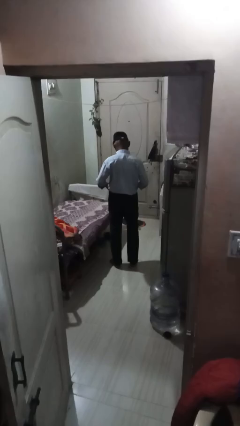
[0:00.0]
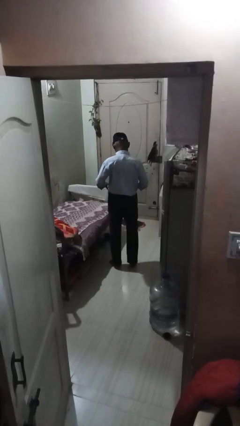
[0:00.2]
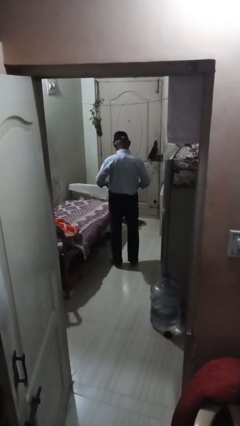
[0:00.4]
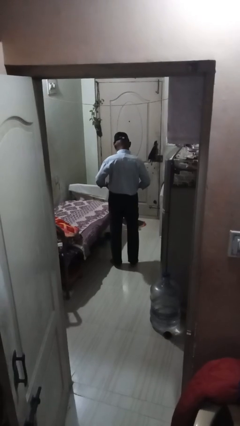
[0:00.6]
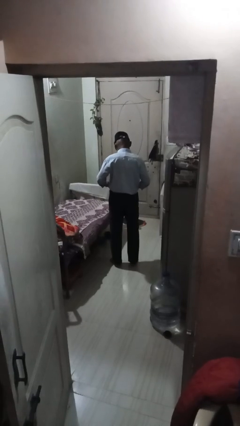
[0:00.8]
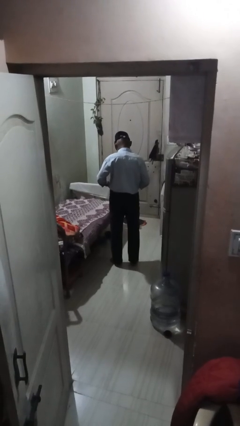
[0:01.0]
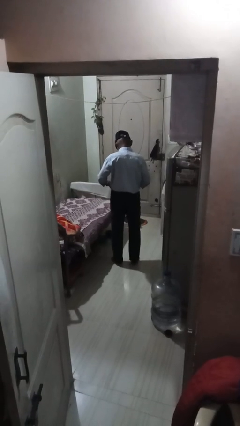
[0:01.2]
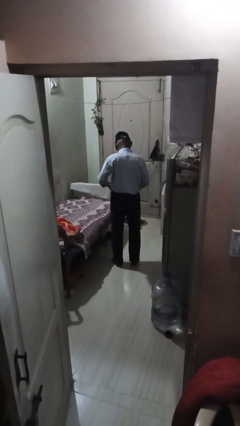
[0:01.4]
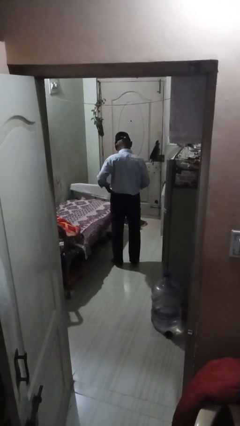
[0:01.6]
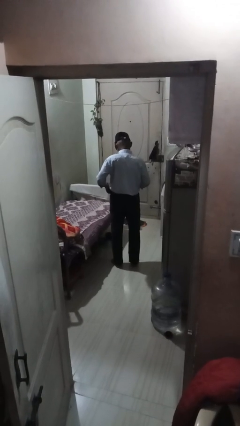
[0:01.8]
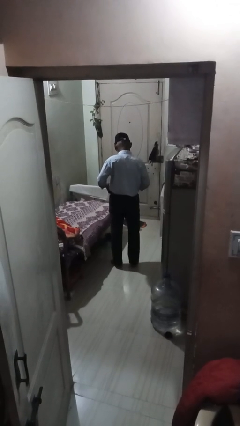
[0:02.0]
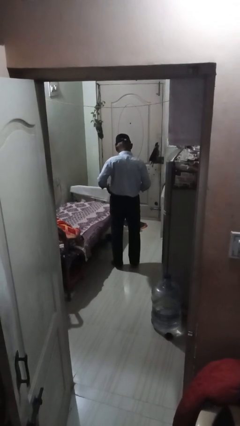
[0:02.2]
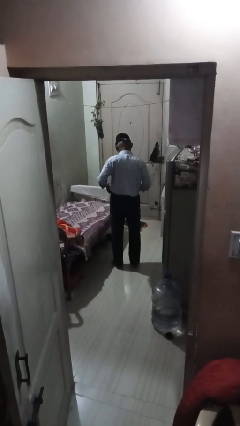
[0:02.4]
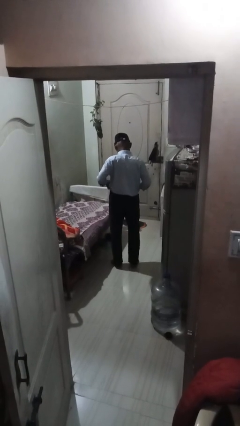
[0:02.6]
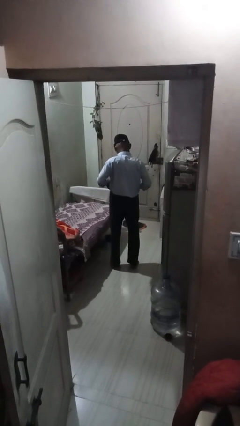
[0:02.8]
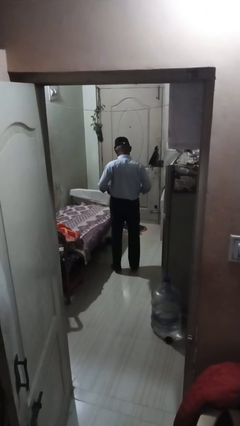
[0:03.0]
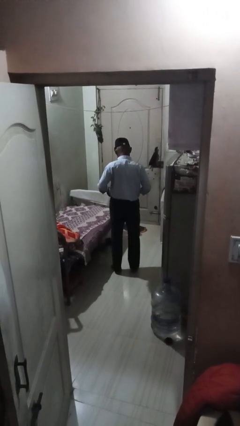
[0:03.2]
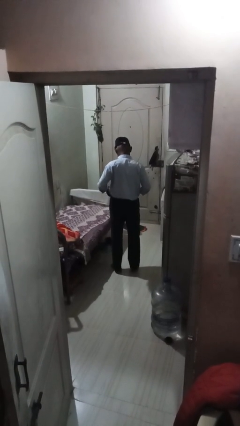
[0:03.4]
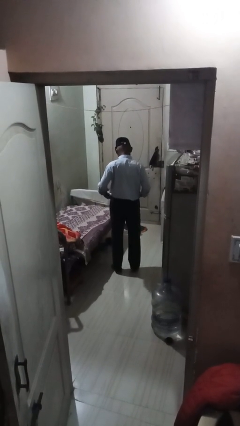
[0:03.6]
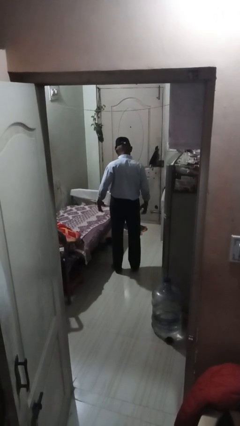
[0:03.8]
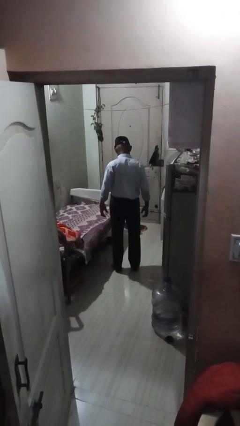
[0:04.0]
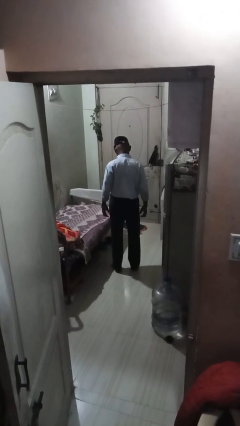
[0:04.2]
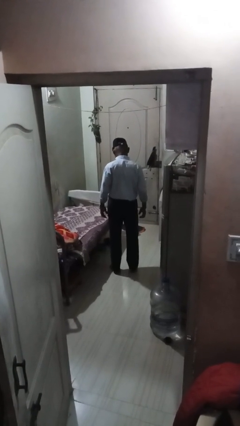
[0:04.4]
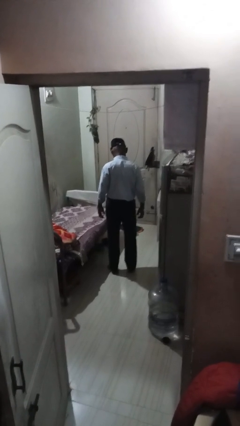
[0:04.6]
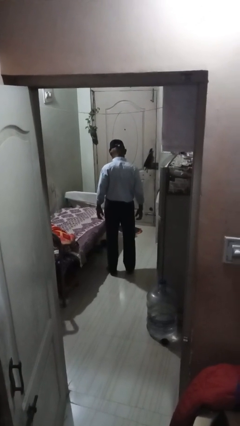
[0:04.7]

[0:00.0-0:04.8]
person hikes up pants

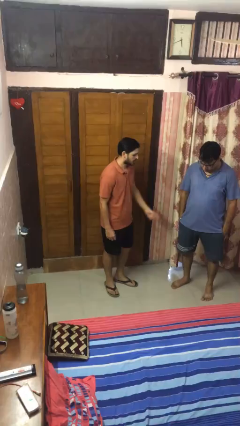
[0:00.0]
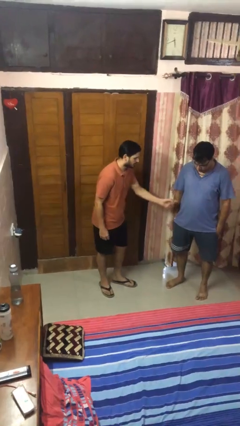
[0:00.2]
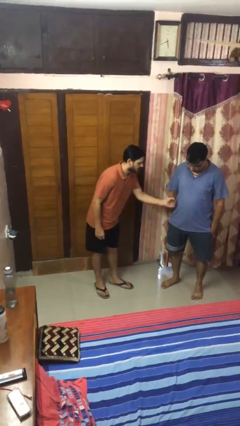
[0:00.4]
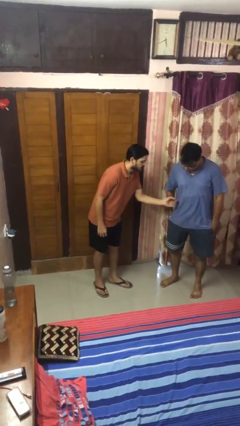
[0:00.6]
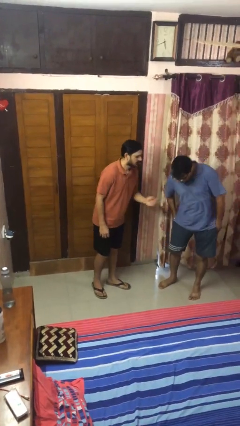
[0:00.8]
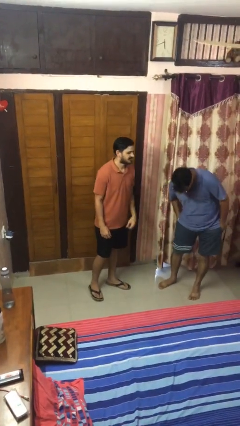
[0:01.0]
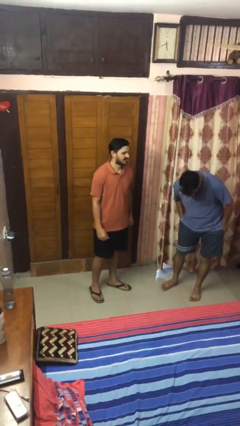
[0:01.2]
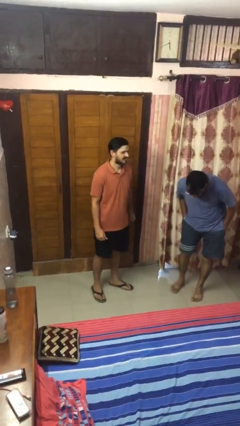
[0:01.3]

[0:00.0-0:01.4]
person tickles person

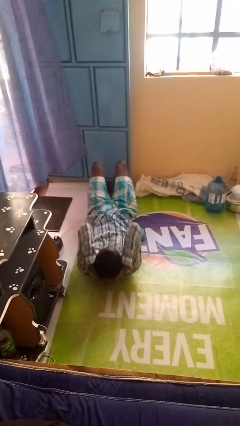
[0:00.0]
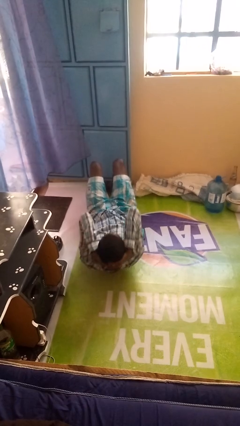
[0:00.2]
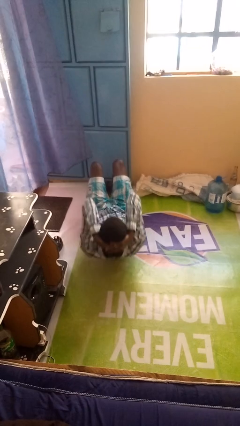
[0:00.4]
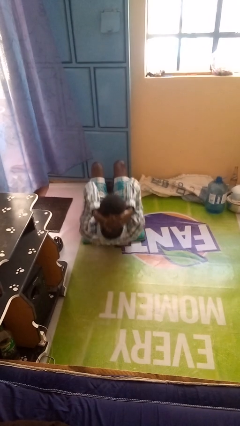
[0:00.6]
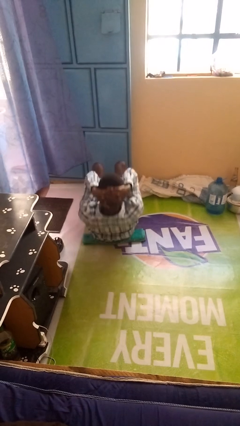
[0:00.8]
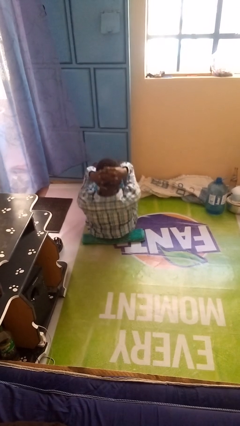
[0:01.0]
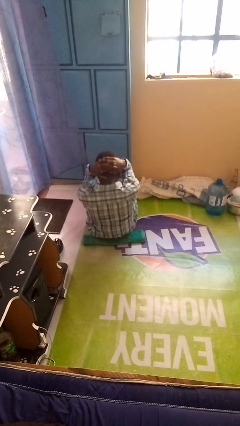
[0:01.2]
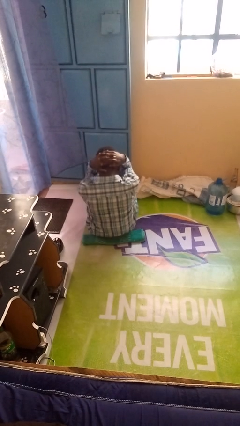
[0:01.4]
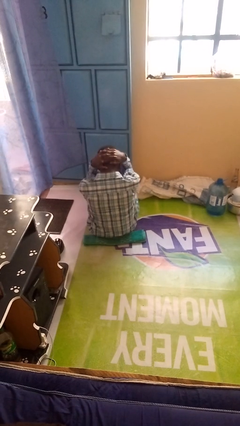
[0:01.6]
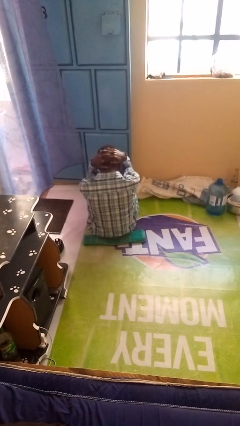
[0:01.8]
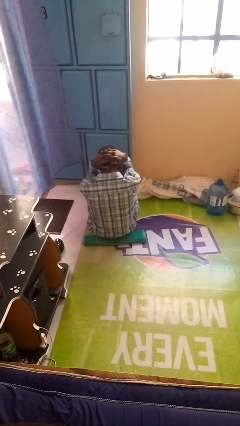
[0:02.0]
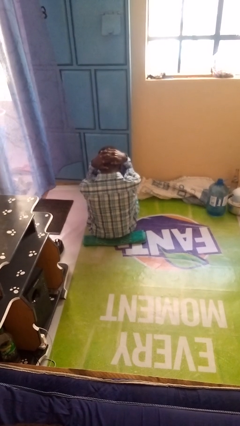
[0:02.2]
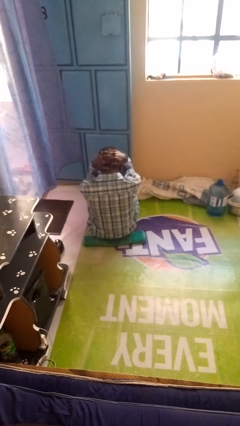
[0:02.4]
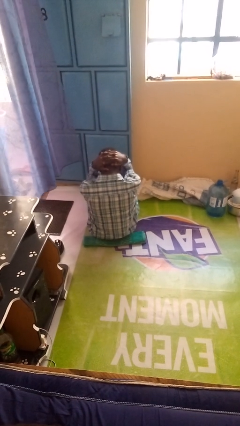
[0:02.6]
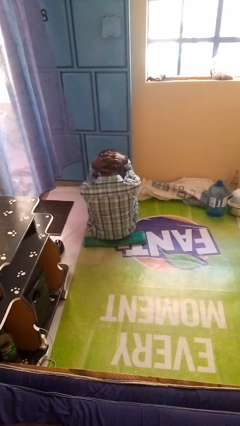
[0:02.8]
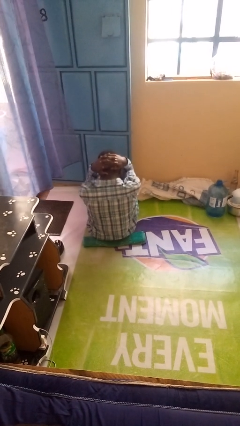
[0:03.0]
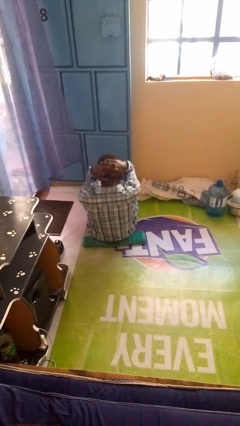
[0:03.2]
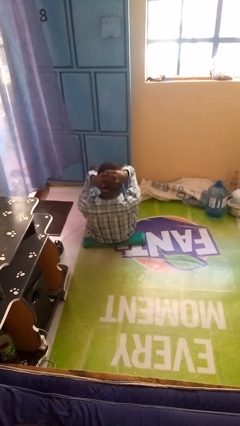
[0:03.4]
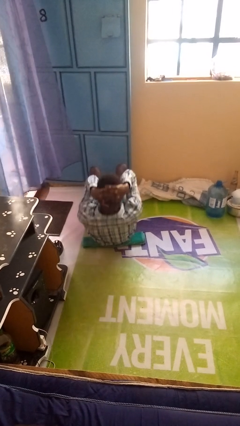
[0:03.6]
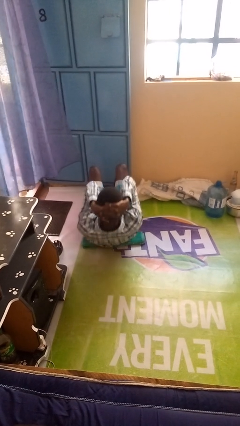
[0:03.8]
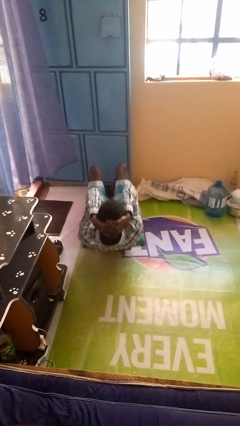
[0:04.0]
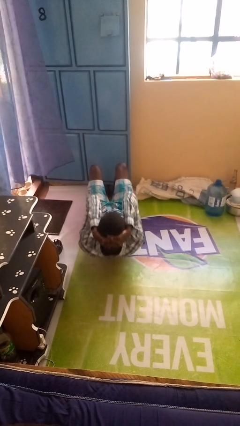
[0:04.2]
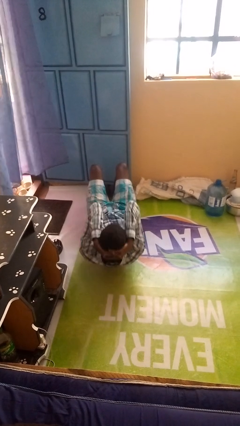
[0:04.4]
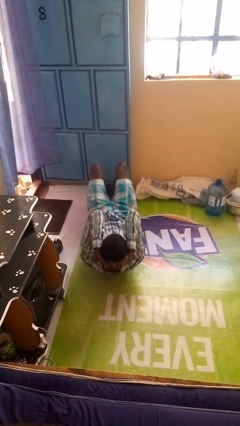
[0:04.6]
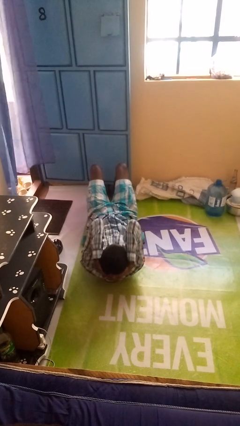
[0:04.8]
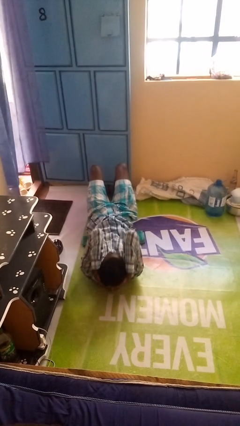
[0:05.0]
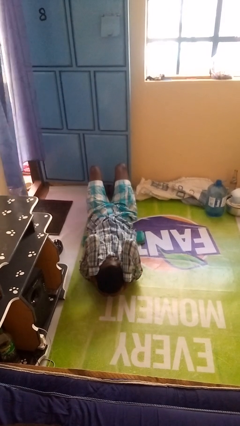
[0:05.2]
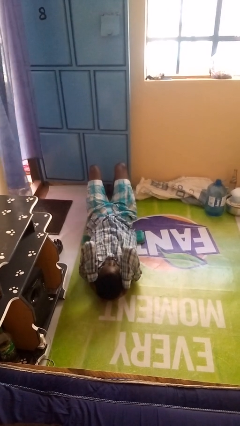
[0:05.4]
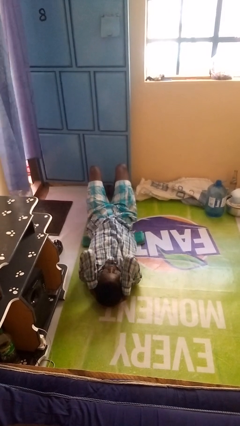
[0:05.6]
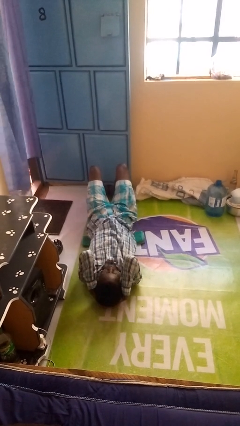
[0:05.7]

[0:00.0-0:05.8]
person exercises with situp

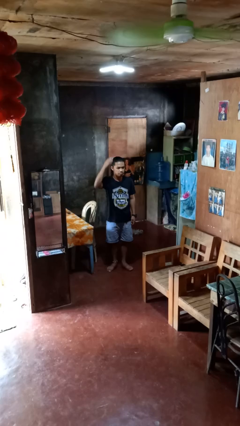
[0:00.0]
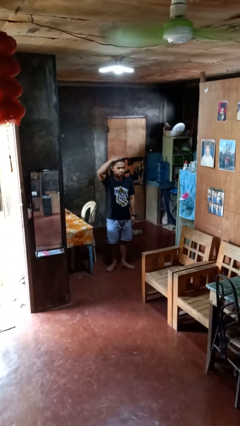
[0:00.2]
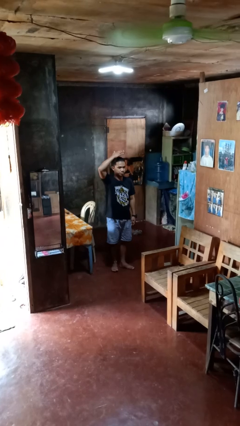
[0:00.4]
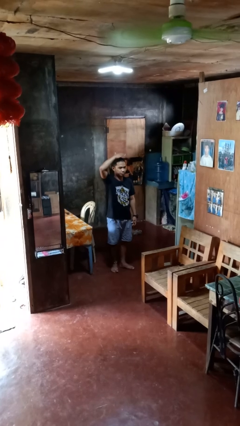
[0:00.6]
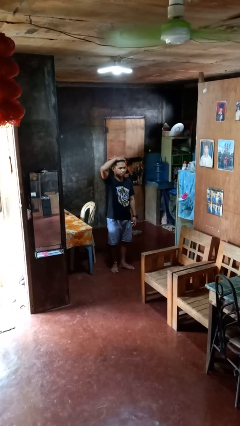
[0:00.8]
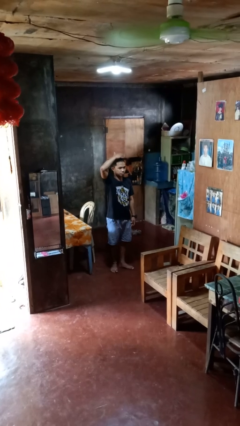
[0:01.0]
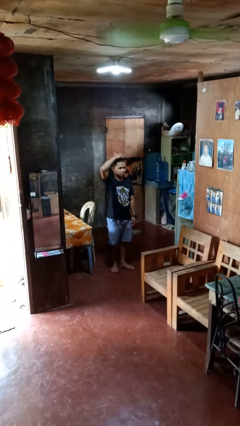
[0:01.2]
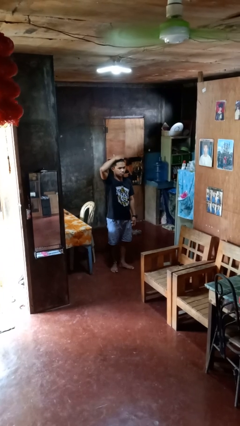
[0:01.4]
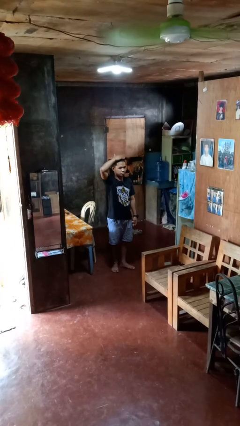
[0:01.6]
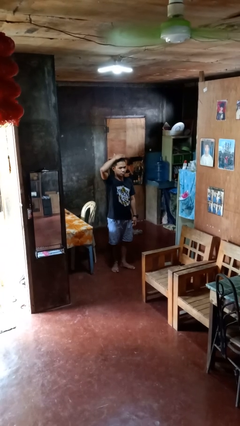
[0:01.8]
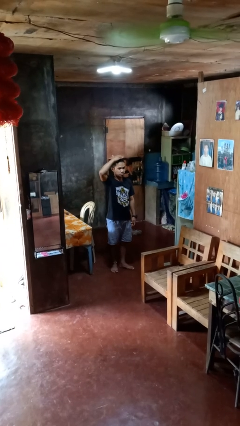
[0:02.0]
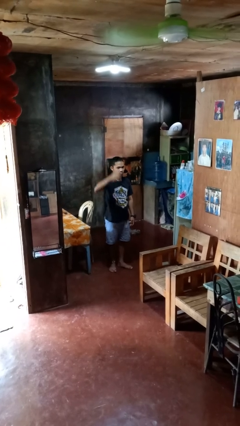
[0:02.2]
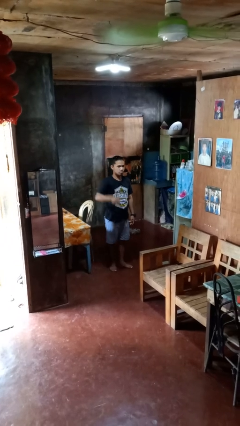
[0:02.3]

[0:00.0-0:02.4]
person pats head

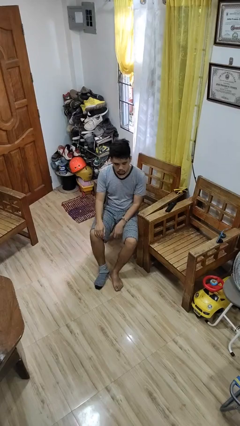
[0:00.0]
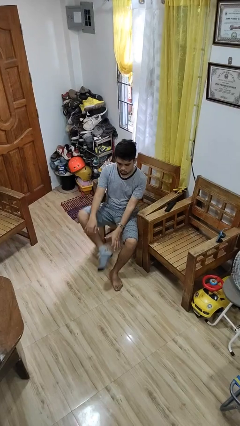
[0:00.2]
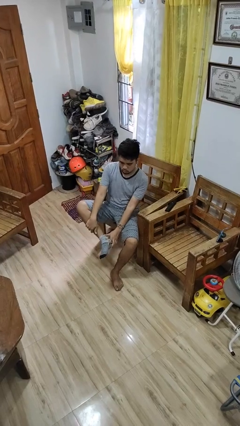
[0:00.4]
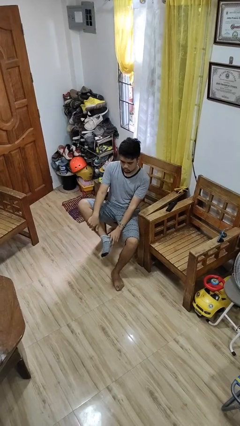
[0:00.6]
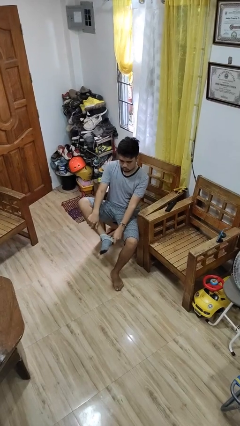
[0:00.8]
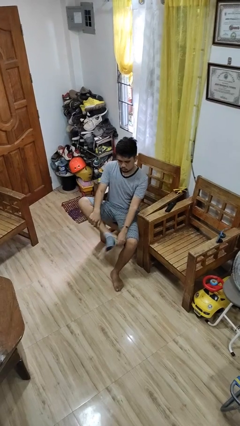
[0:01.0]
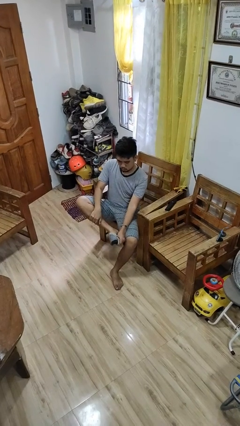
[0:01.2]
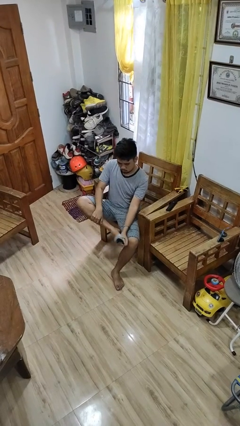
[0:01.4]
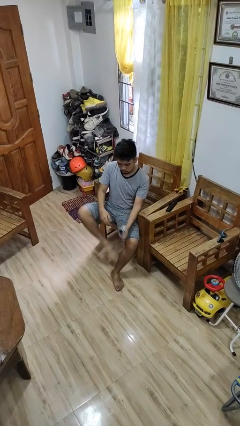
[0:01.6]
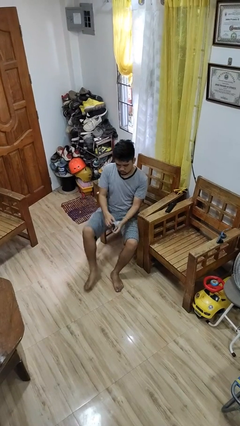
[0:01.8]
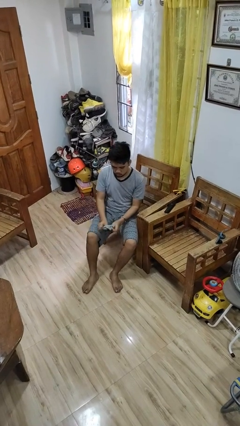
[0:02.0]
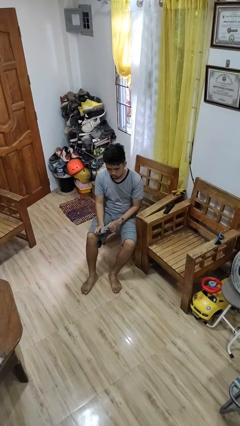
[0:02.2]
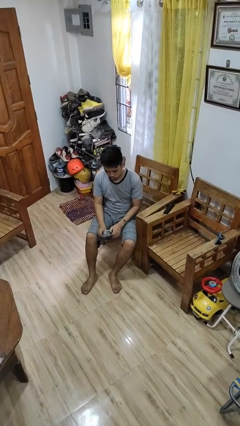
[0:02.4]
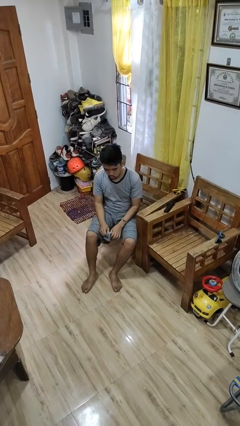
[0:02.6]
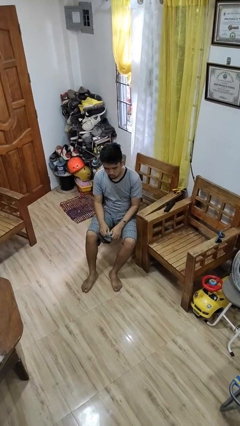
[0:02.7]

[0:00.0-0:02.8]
person takes off socks
